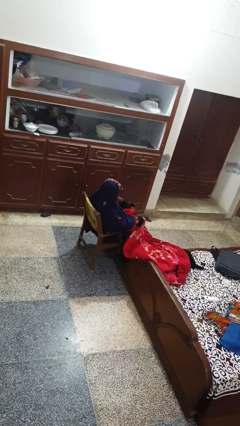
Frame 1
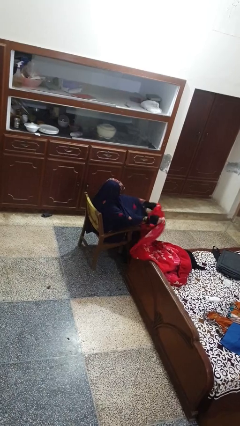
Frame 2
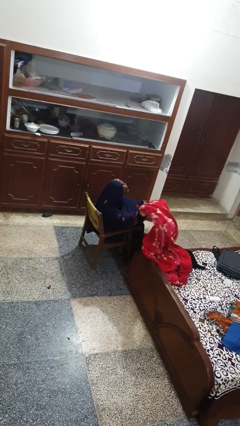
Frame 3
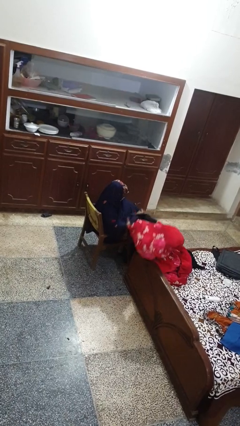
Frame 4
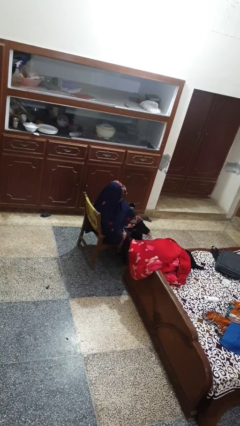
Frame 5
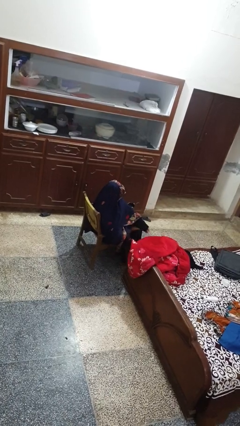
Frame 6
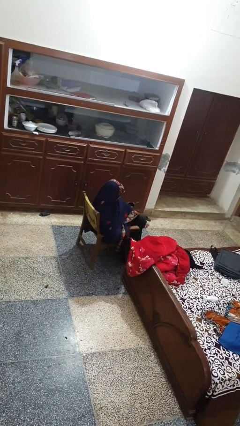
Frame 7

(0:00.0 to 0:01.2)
person uncovers with blanket

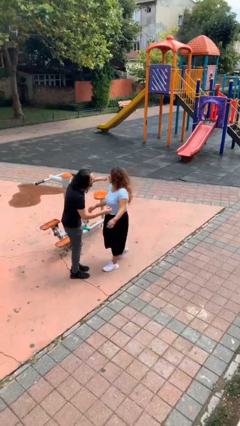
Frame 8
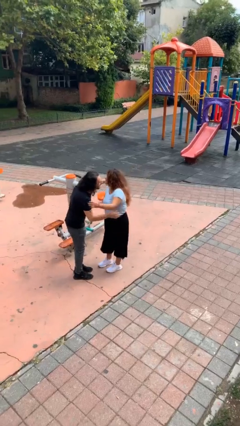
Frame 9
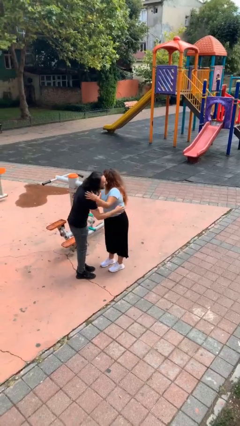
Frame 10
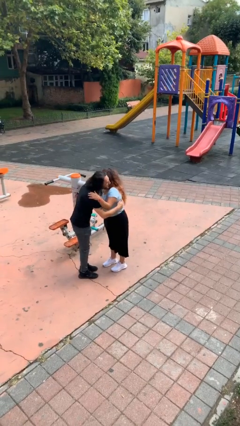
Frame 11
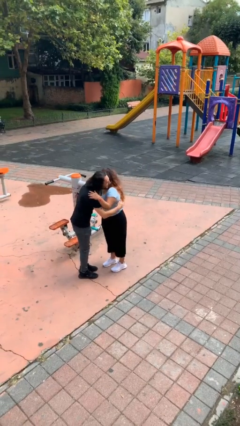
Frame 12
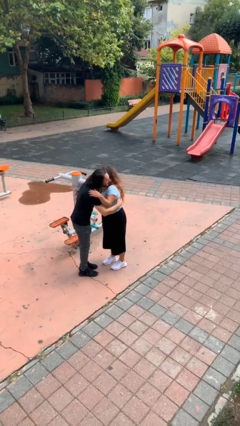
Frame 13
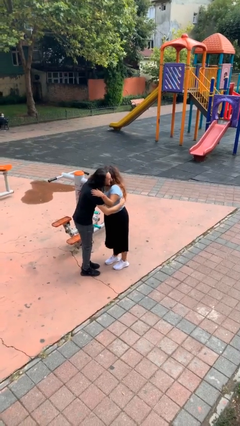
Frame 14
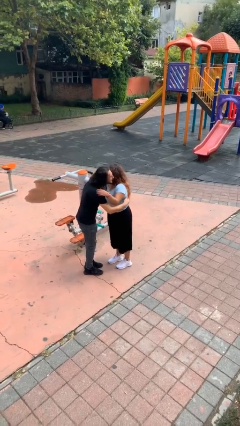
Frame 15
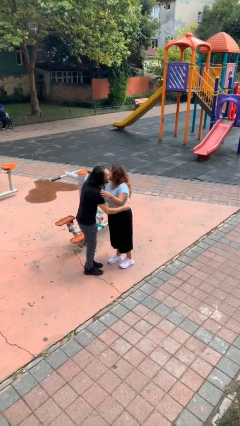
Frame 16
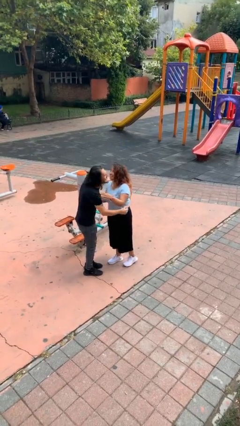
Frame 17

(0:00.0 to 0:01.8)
person embraces person

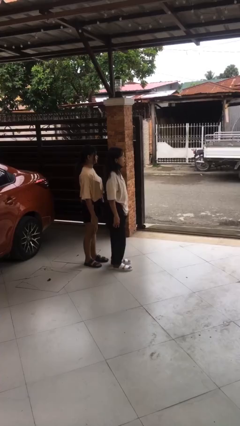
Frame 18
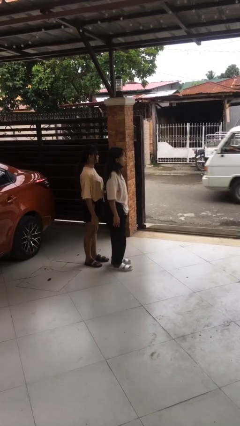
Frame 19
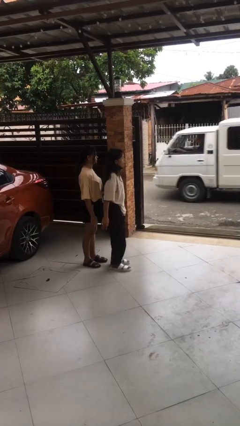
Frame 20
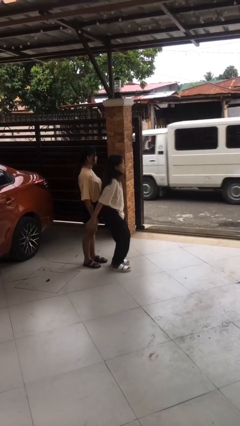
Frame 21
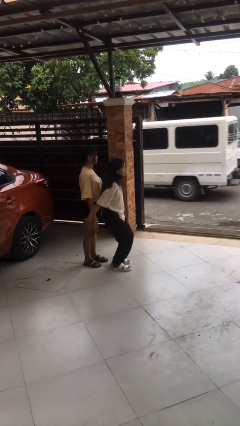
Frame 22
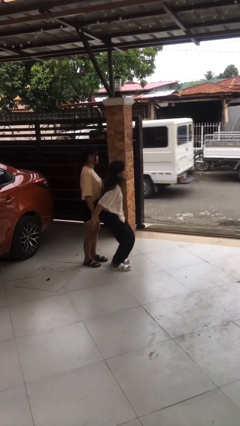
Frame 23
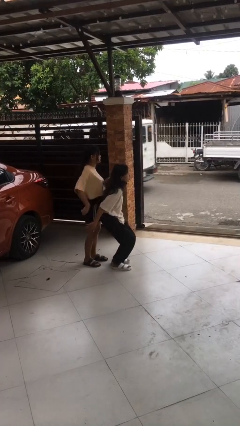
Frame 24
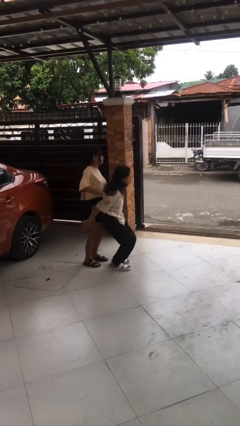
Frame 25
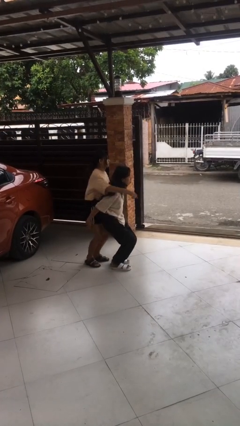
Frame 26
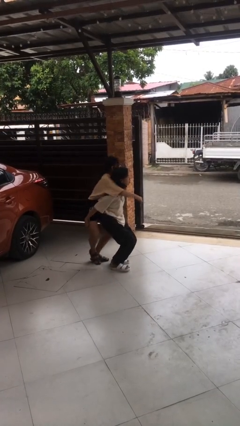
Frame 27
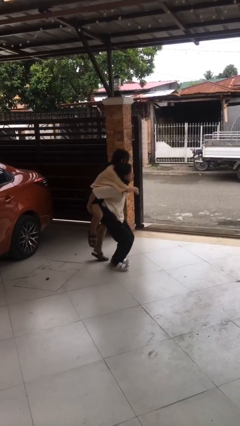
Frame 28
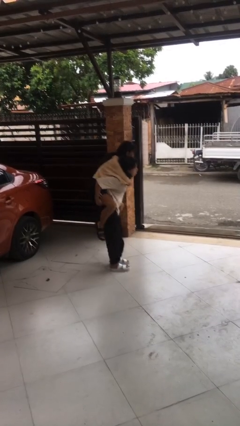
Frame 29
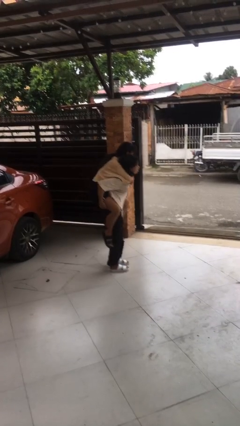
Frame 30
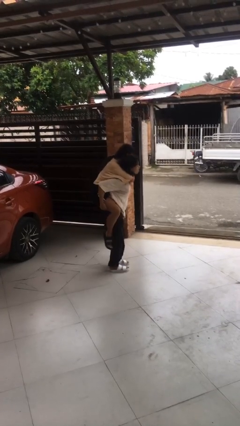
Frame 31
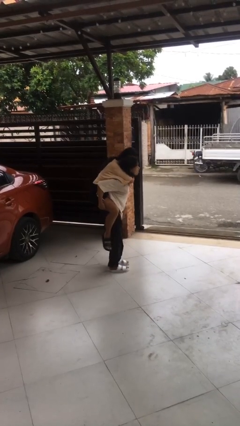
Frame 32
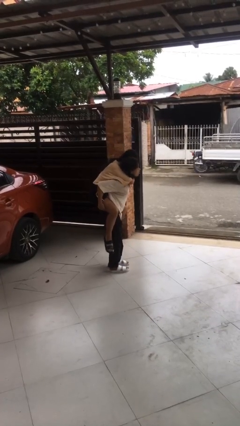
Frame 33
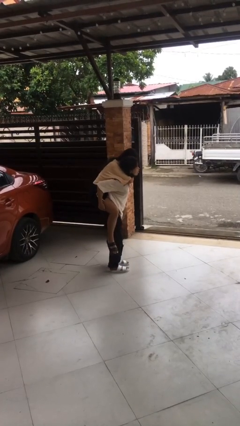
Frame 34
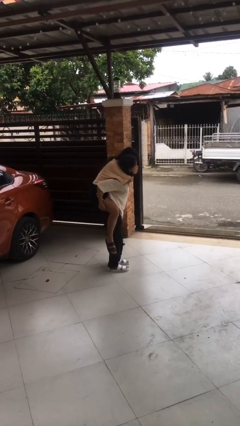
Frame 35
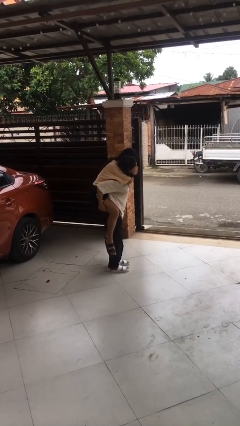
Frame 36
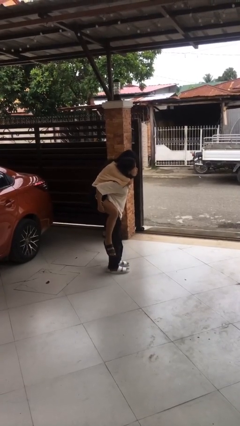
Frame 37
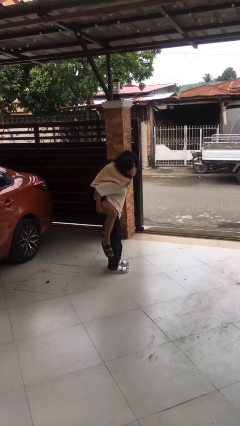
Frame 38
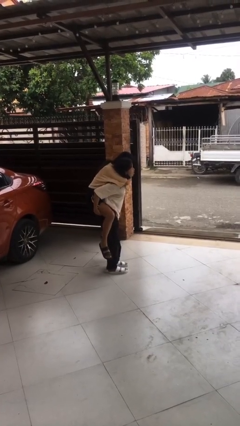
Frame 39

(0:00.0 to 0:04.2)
person carries person over shoulder

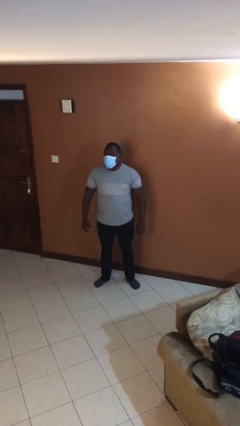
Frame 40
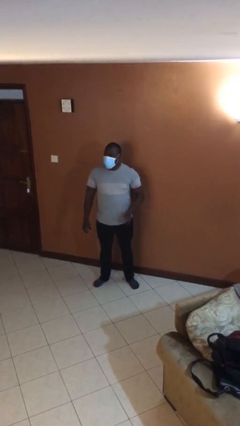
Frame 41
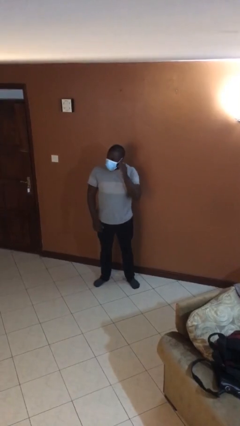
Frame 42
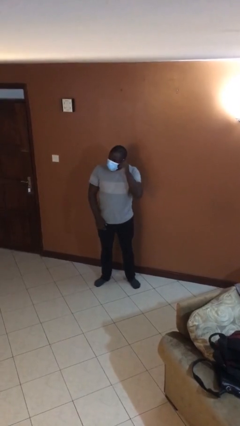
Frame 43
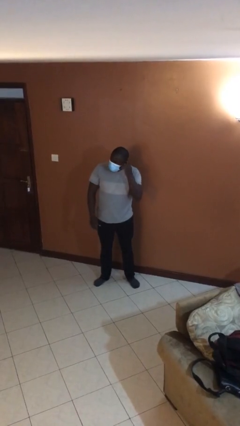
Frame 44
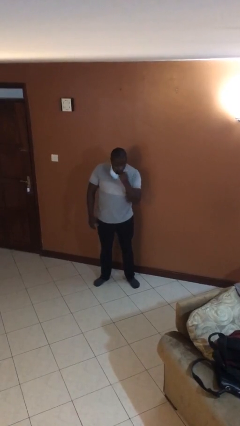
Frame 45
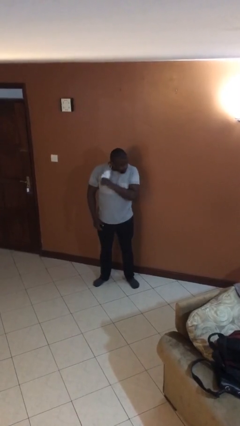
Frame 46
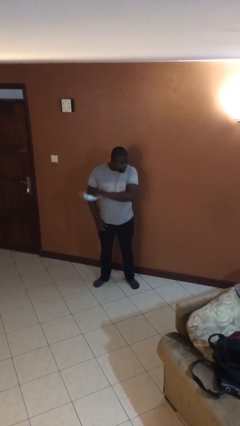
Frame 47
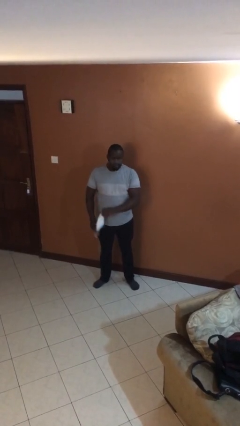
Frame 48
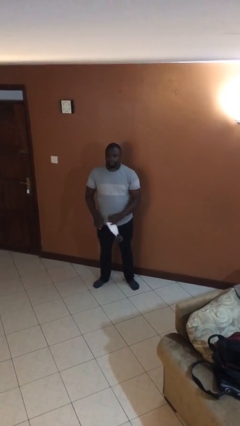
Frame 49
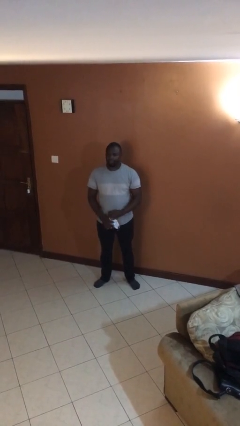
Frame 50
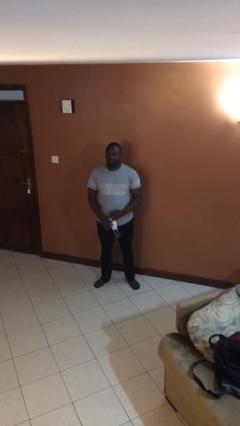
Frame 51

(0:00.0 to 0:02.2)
person takes off facemask

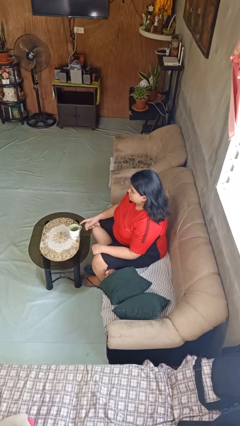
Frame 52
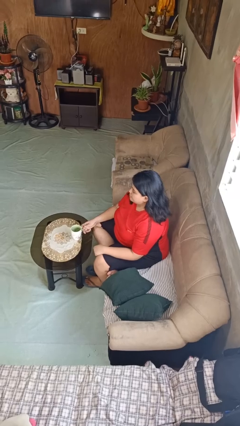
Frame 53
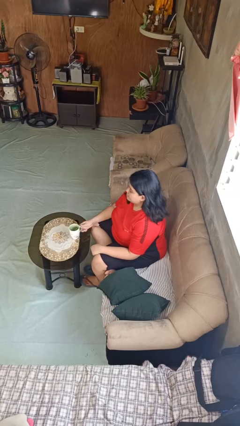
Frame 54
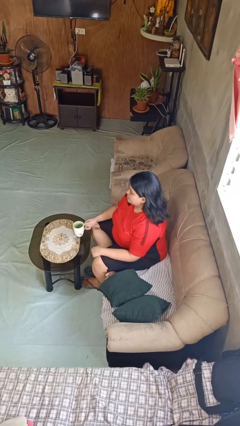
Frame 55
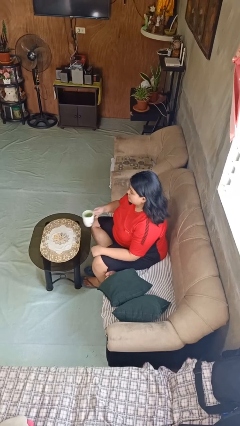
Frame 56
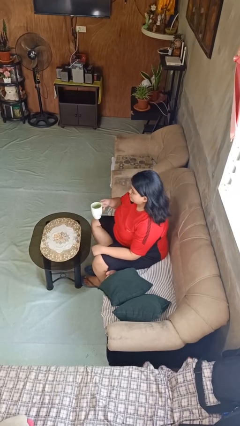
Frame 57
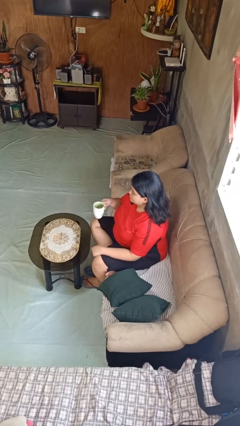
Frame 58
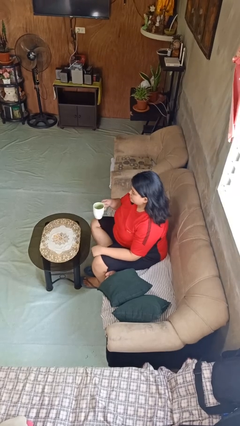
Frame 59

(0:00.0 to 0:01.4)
person picks up object from table

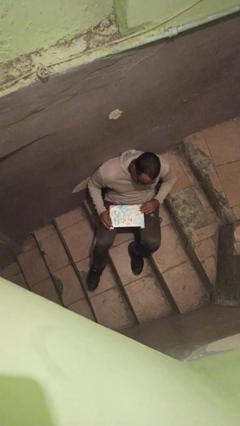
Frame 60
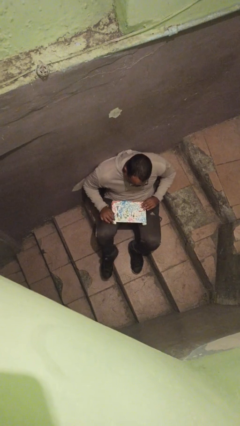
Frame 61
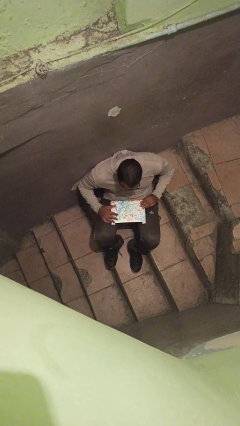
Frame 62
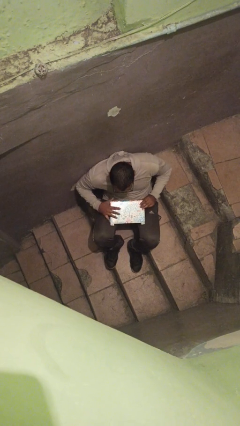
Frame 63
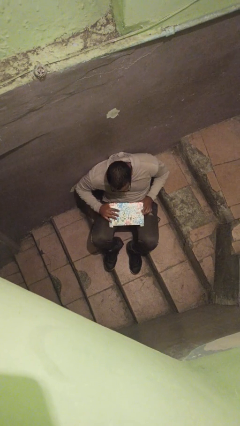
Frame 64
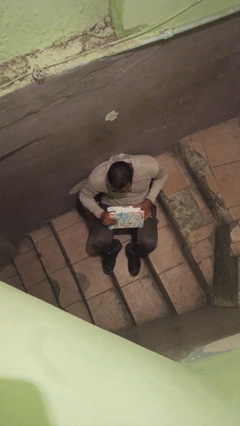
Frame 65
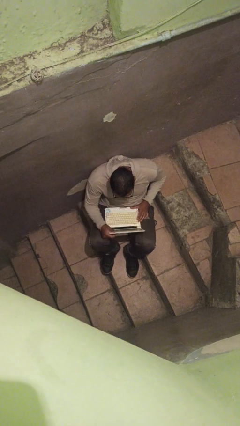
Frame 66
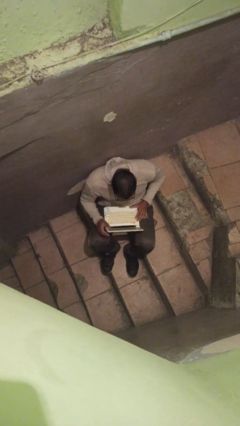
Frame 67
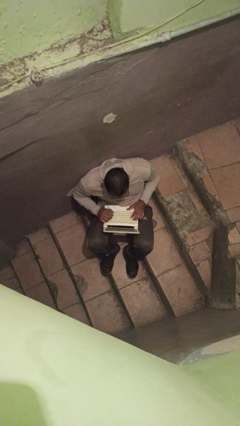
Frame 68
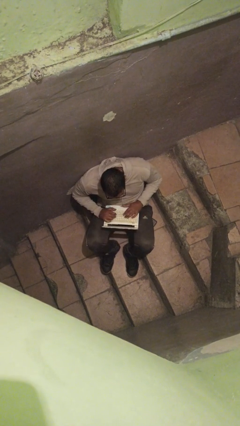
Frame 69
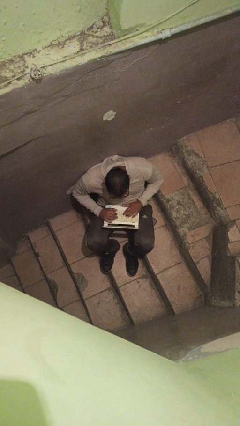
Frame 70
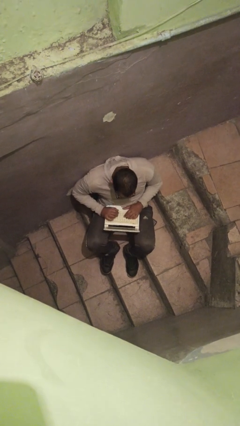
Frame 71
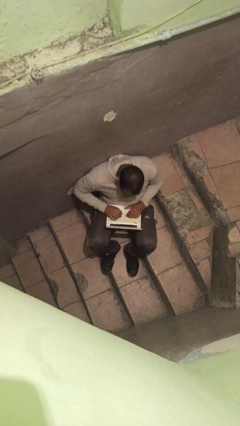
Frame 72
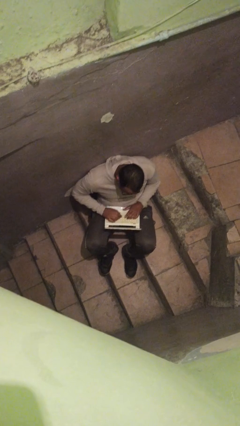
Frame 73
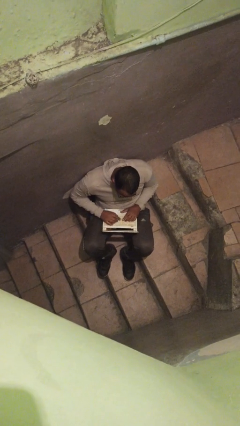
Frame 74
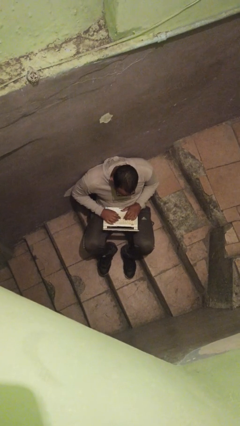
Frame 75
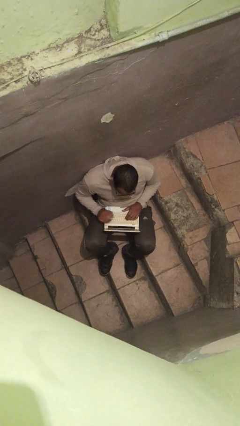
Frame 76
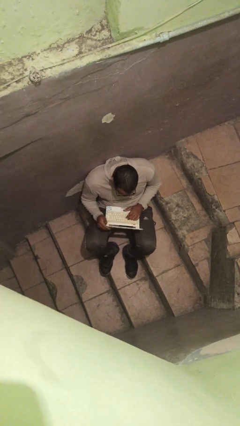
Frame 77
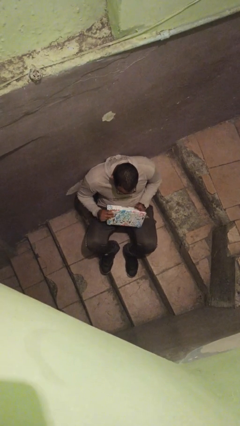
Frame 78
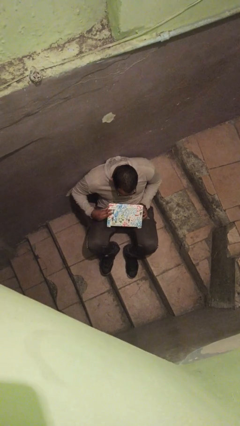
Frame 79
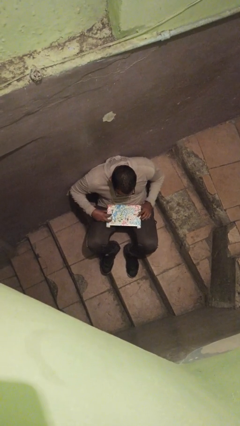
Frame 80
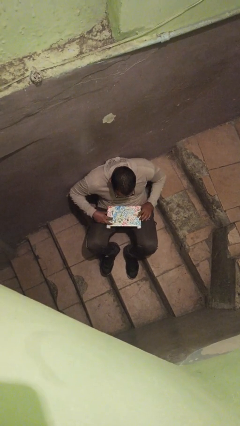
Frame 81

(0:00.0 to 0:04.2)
person interacts with laptop

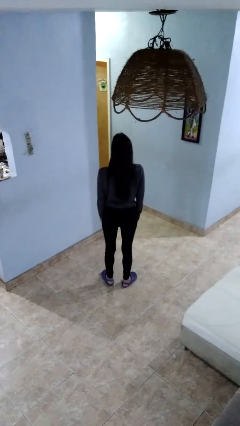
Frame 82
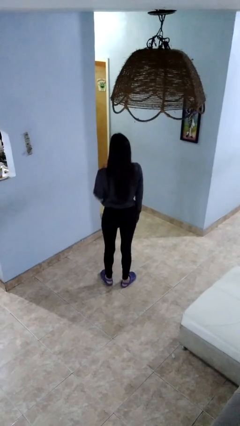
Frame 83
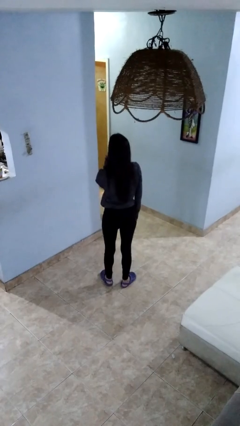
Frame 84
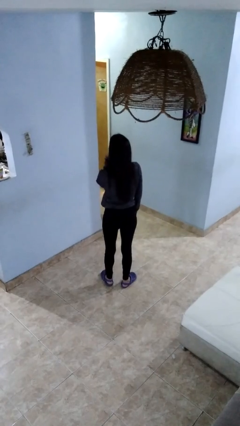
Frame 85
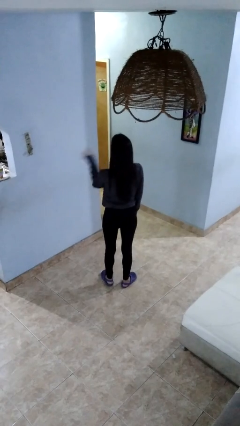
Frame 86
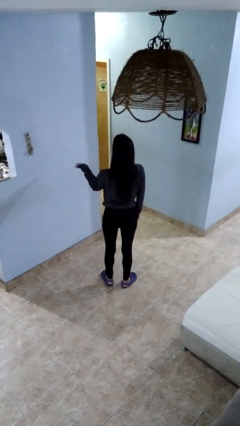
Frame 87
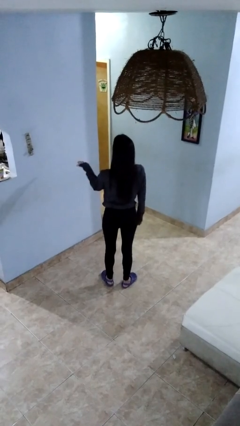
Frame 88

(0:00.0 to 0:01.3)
person gestures blow kiss

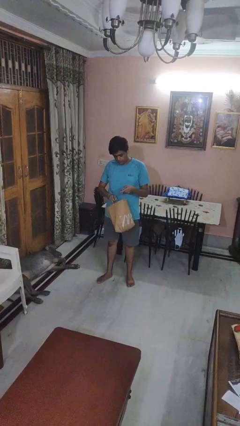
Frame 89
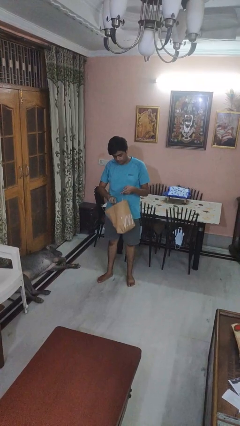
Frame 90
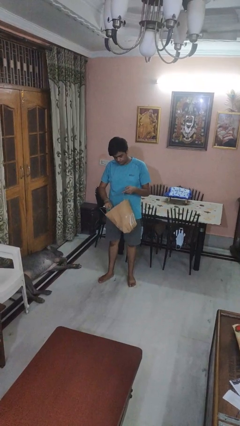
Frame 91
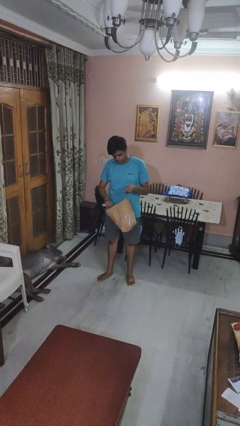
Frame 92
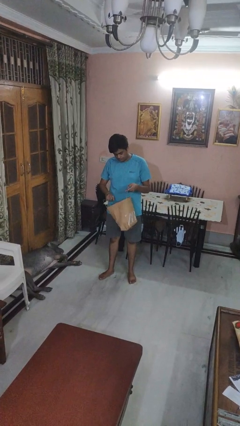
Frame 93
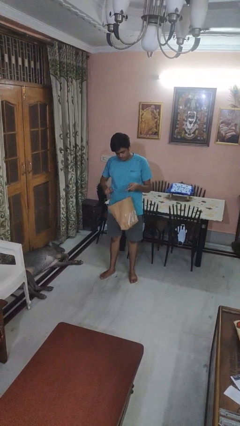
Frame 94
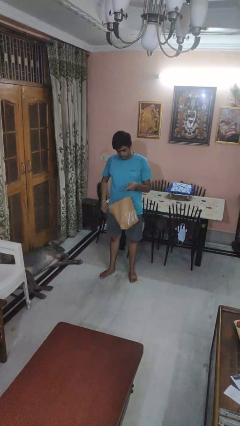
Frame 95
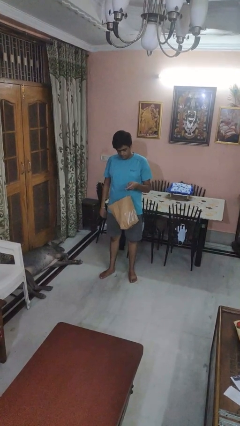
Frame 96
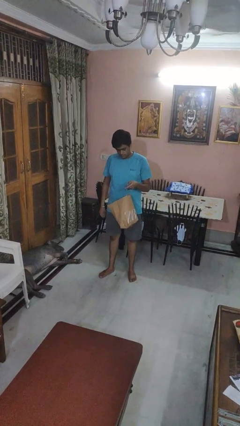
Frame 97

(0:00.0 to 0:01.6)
person puts object into bag
